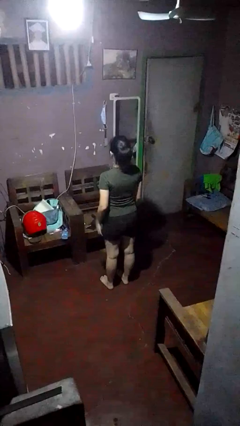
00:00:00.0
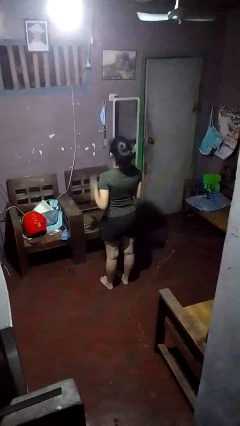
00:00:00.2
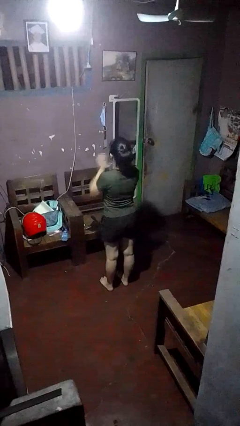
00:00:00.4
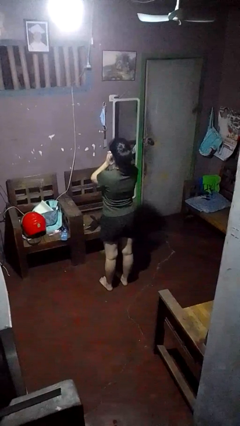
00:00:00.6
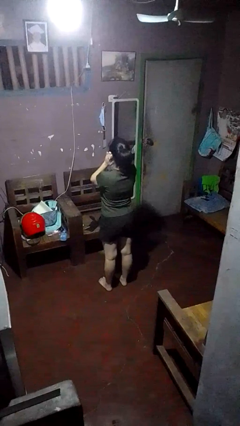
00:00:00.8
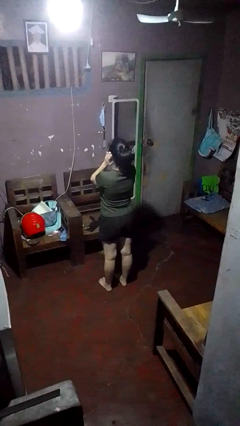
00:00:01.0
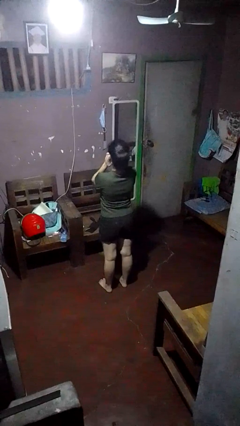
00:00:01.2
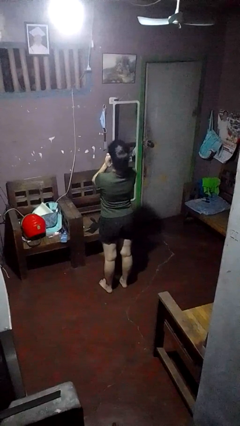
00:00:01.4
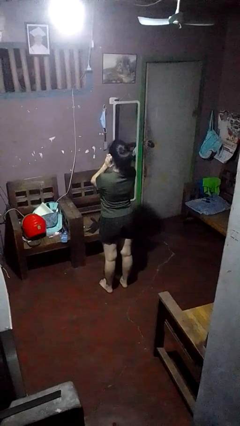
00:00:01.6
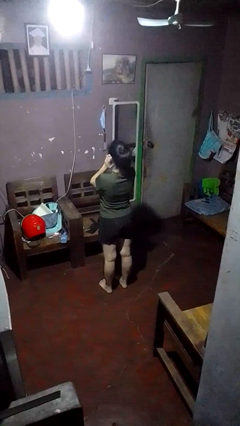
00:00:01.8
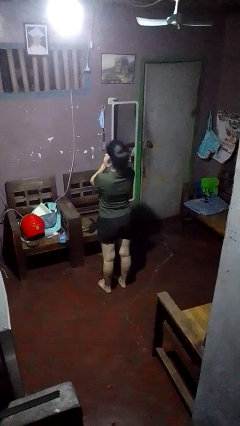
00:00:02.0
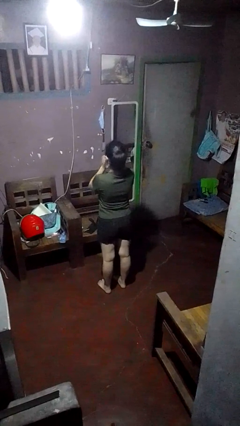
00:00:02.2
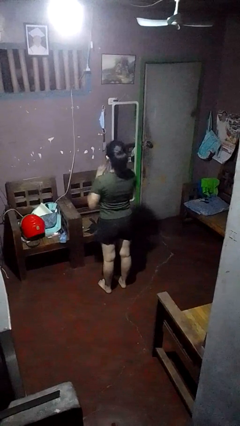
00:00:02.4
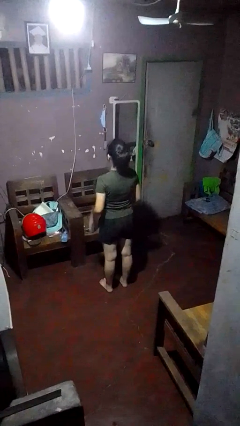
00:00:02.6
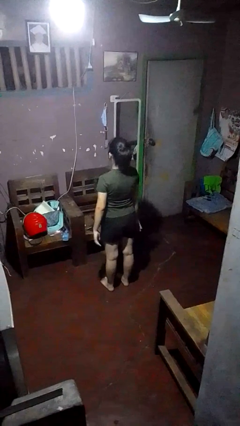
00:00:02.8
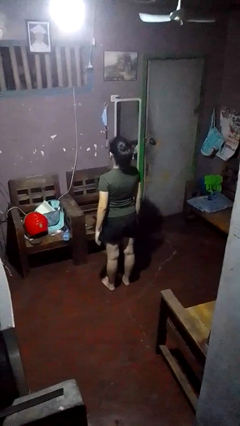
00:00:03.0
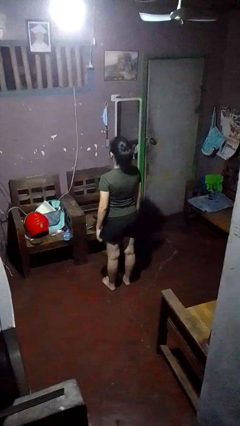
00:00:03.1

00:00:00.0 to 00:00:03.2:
person puts fingers in ear

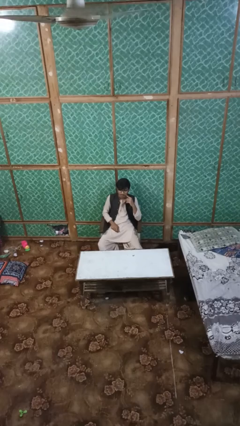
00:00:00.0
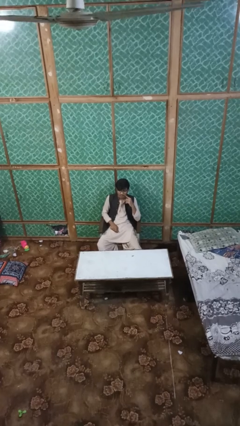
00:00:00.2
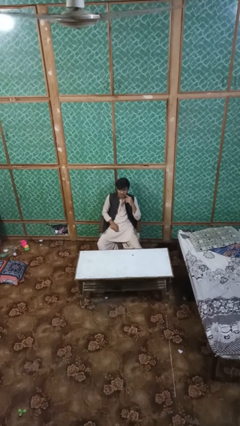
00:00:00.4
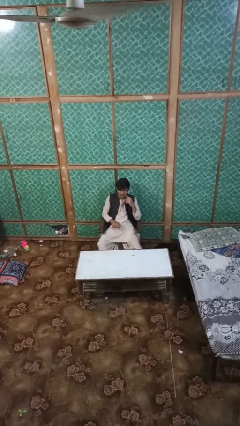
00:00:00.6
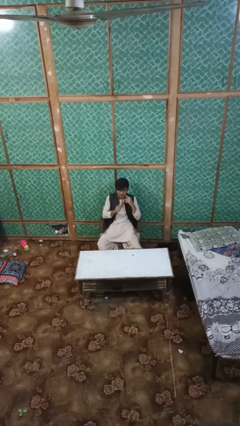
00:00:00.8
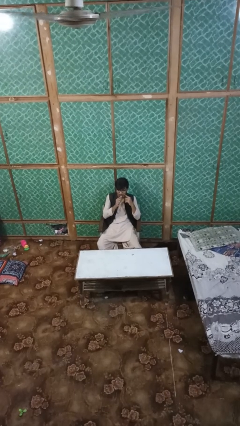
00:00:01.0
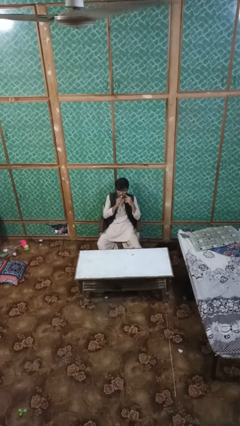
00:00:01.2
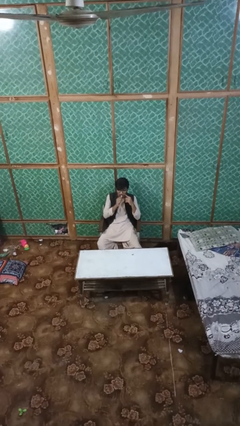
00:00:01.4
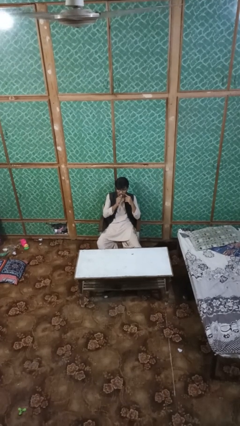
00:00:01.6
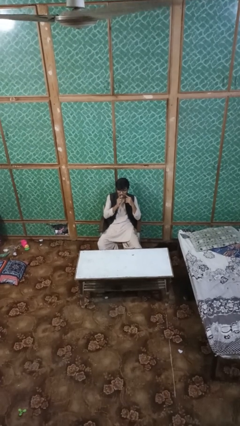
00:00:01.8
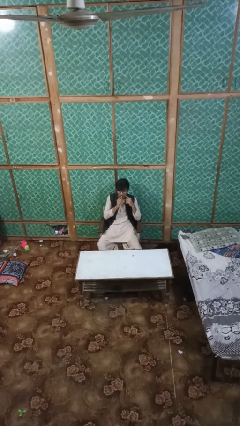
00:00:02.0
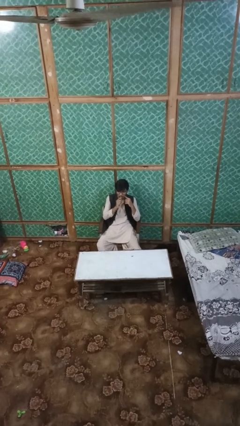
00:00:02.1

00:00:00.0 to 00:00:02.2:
person vapes

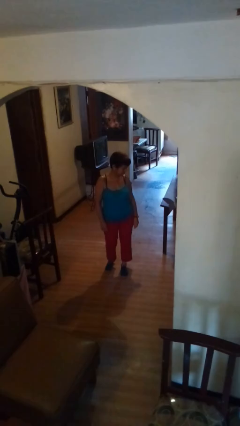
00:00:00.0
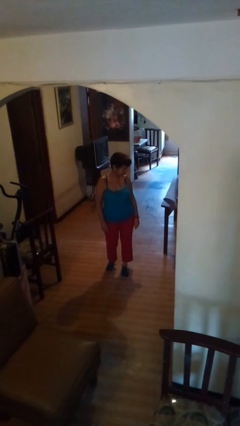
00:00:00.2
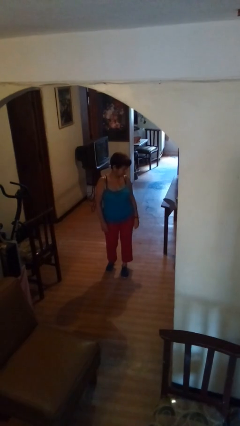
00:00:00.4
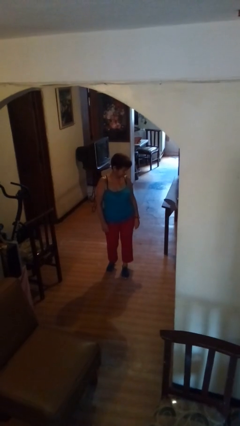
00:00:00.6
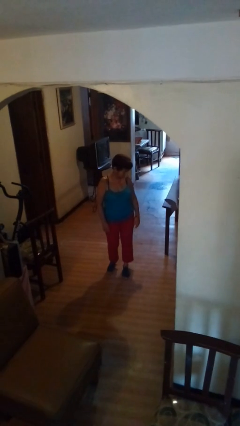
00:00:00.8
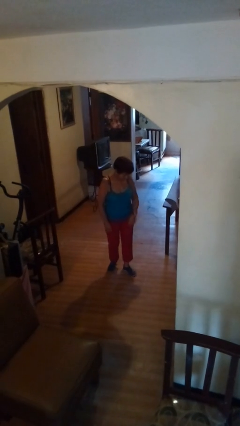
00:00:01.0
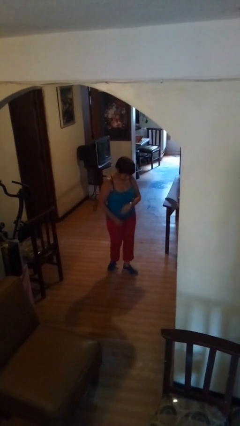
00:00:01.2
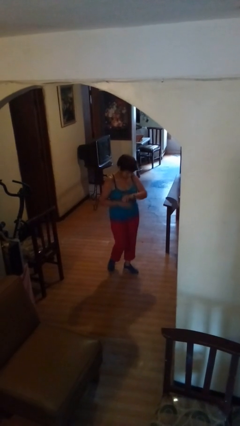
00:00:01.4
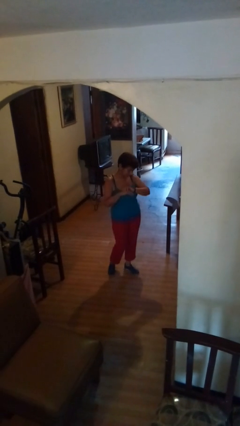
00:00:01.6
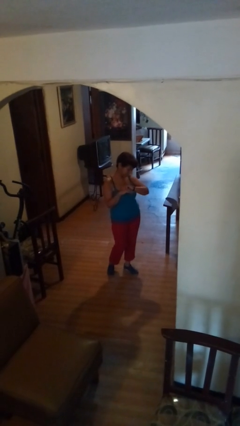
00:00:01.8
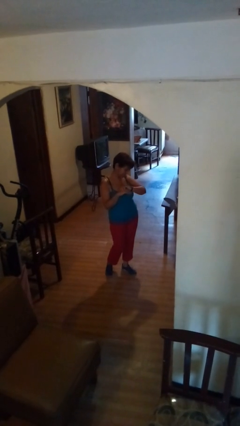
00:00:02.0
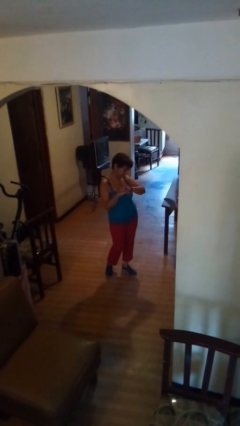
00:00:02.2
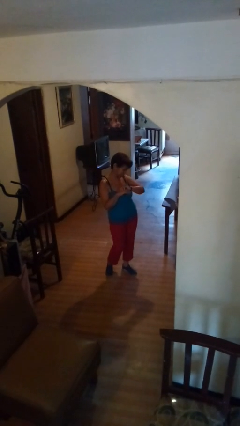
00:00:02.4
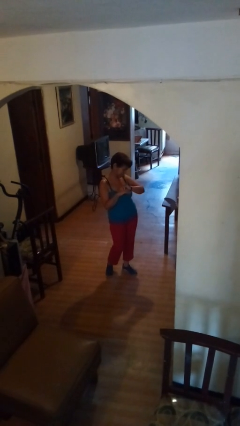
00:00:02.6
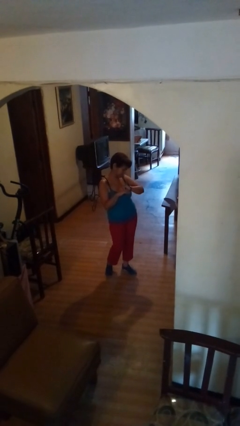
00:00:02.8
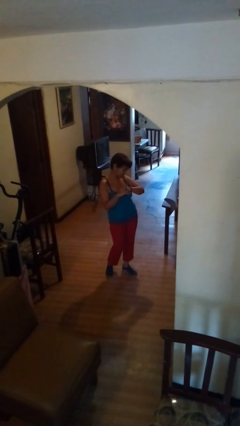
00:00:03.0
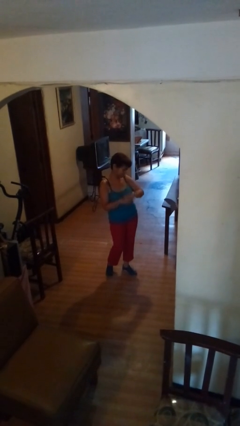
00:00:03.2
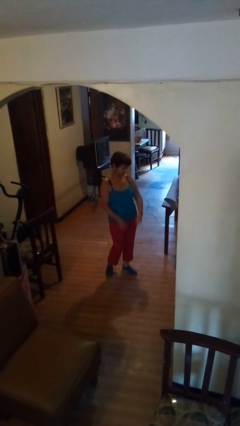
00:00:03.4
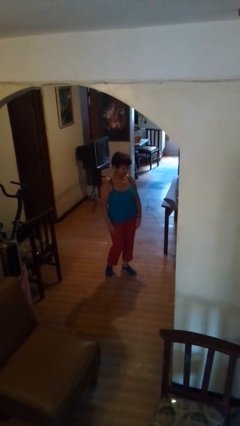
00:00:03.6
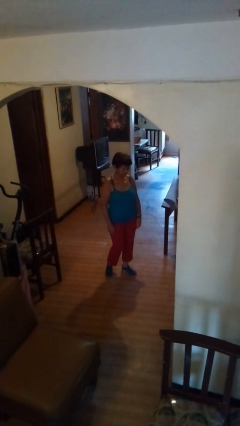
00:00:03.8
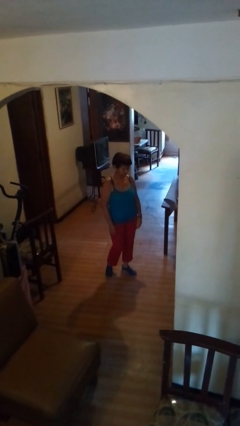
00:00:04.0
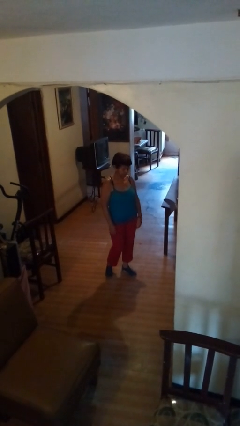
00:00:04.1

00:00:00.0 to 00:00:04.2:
person looks at wristwatch

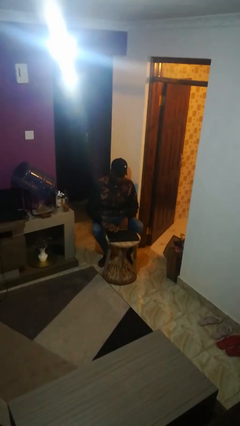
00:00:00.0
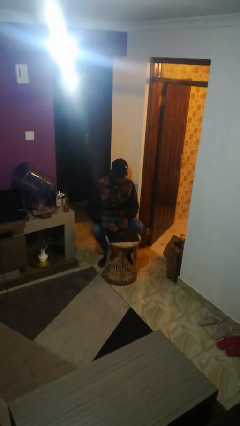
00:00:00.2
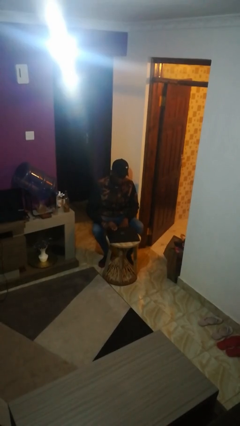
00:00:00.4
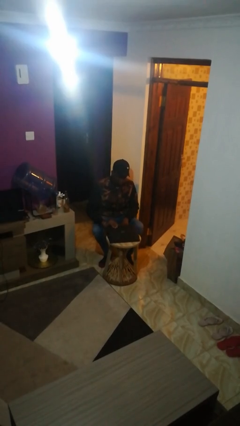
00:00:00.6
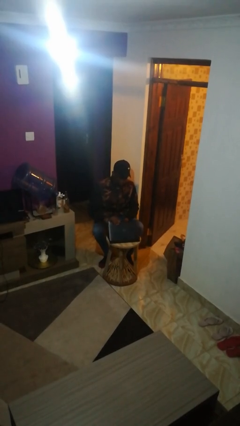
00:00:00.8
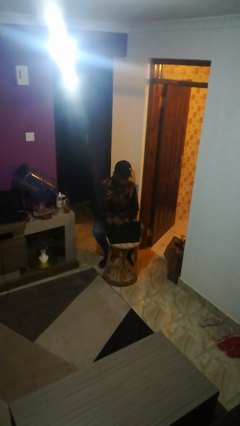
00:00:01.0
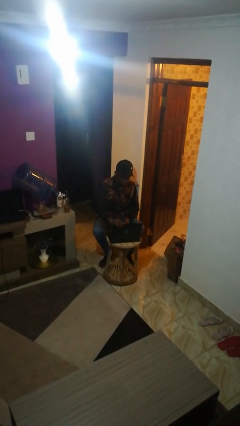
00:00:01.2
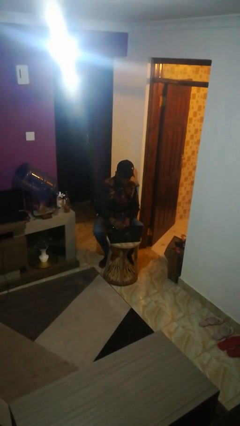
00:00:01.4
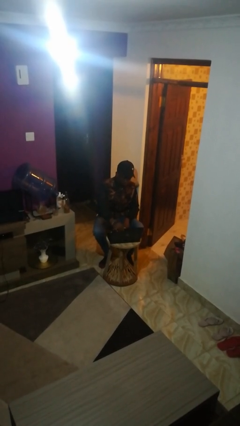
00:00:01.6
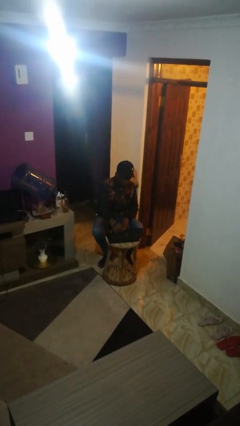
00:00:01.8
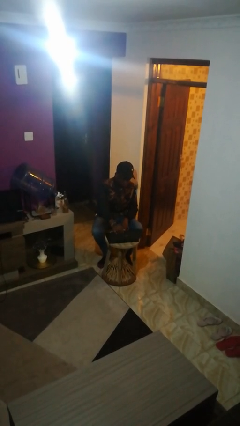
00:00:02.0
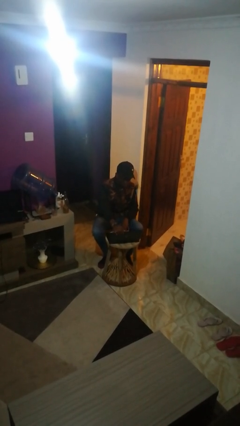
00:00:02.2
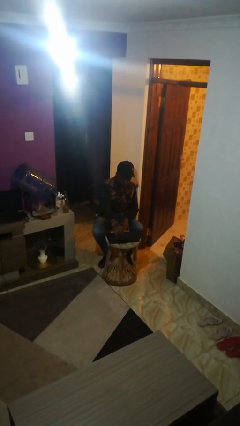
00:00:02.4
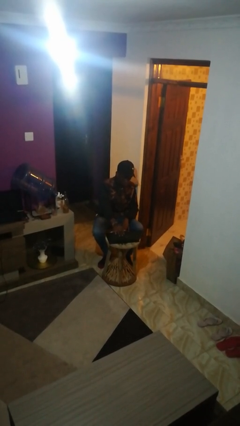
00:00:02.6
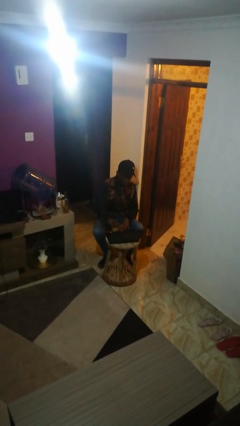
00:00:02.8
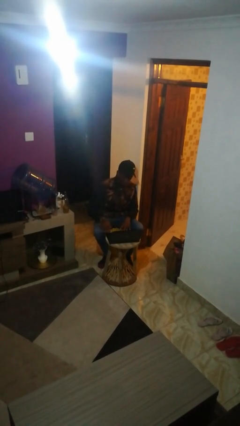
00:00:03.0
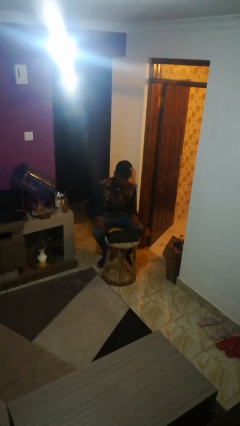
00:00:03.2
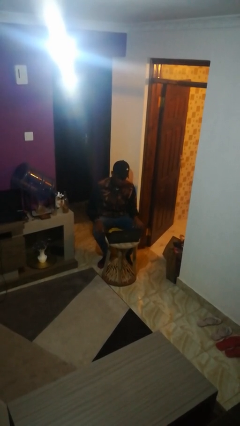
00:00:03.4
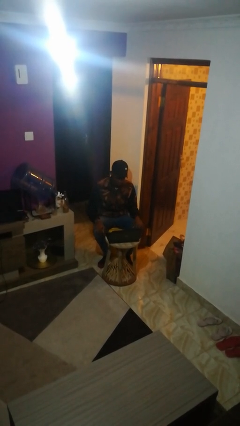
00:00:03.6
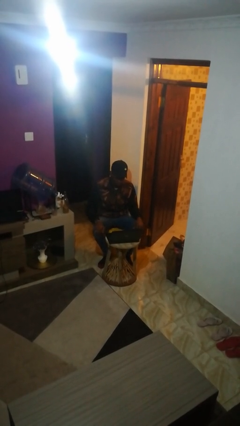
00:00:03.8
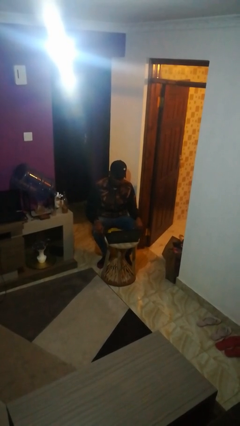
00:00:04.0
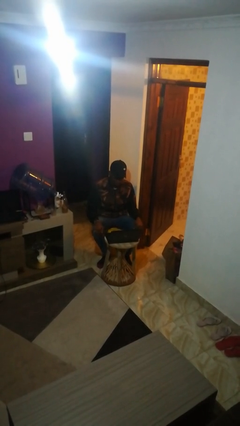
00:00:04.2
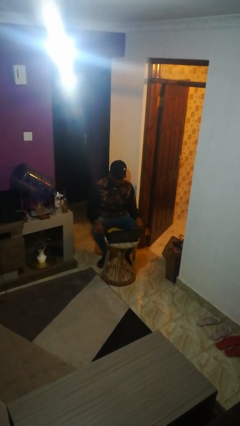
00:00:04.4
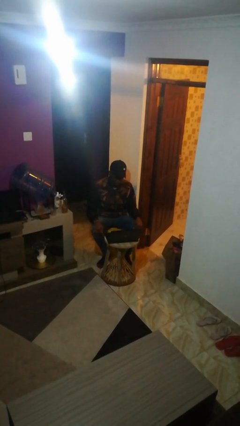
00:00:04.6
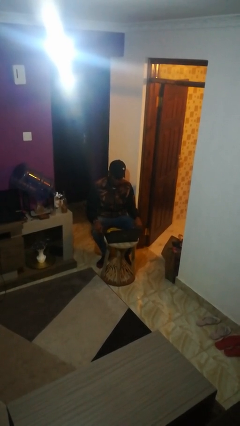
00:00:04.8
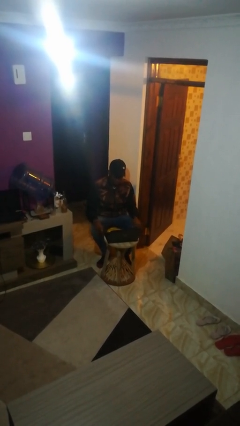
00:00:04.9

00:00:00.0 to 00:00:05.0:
person opens laptop

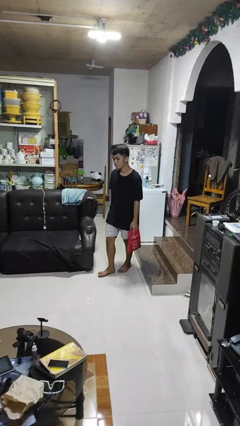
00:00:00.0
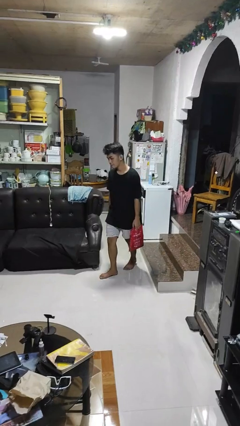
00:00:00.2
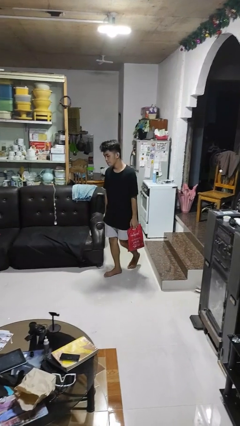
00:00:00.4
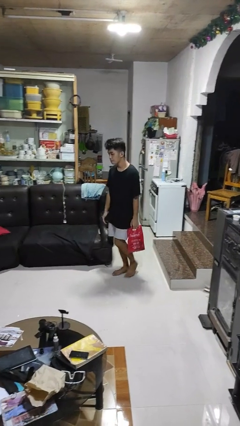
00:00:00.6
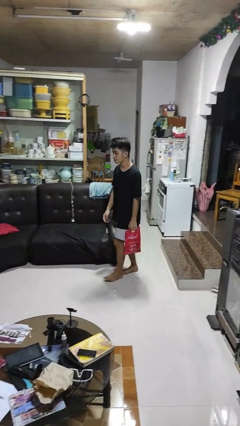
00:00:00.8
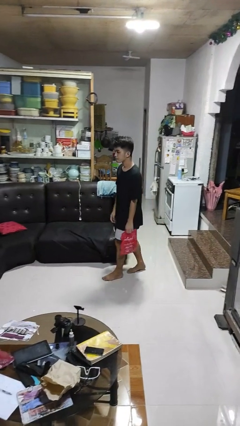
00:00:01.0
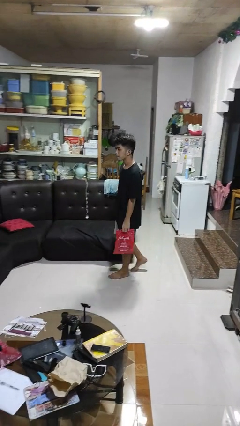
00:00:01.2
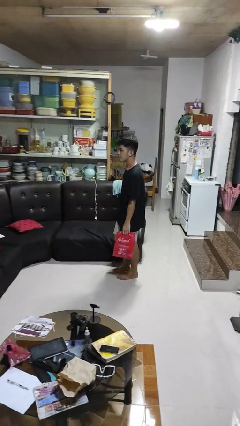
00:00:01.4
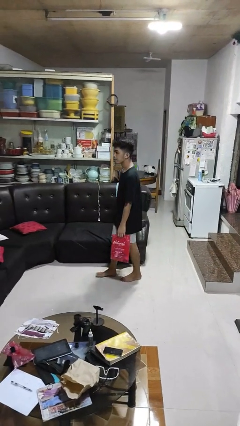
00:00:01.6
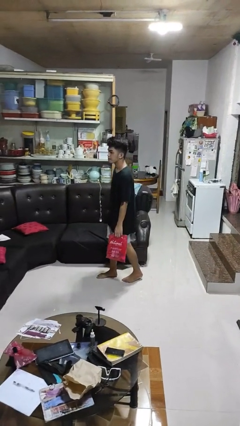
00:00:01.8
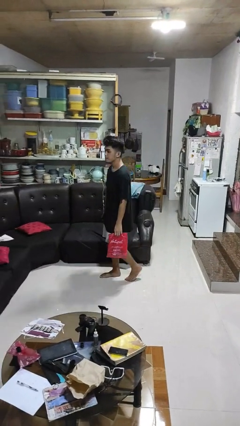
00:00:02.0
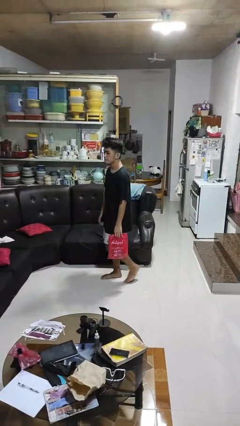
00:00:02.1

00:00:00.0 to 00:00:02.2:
person carries groceries

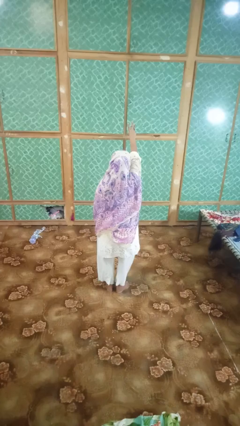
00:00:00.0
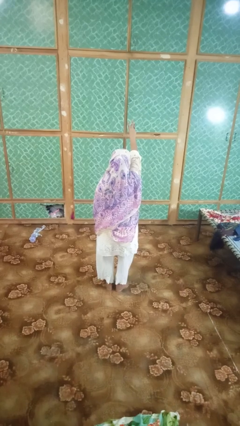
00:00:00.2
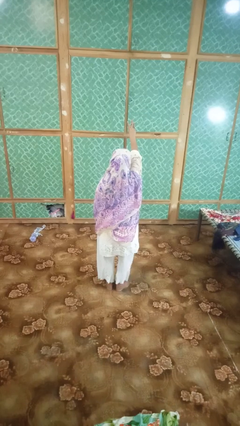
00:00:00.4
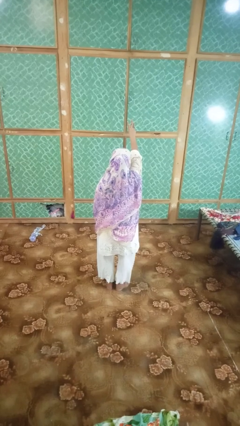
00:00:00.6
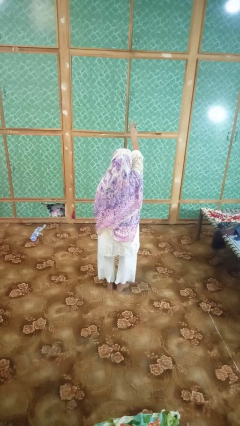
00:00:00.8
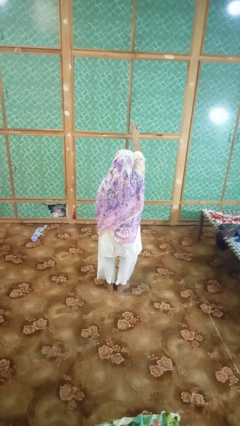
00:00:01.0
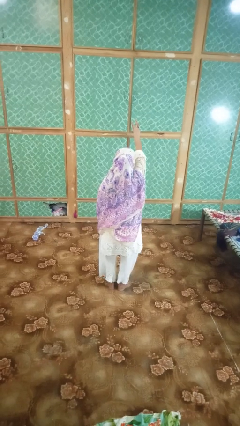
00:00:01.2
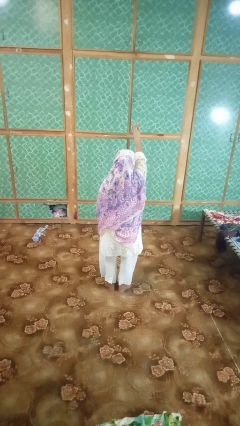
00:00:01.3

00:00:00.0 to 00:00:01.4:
person gestures number three
